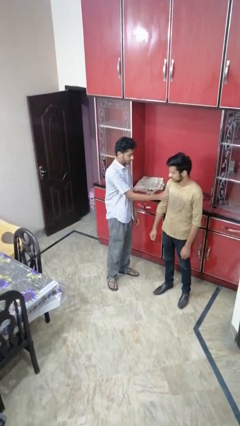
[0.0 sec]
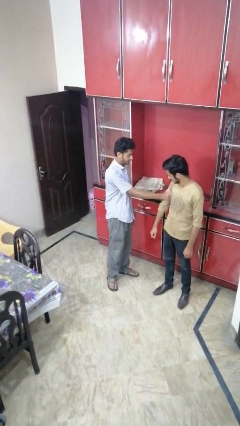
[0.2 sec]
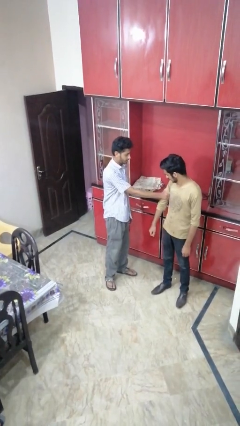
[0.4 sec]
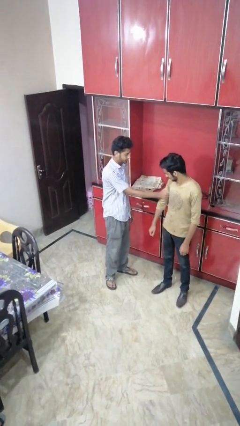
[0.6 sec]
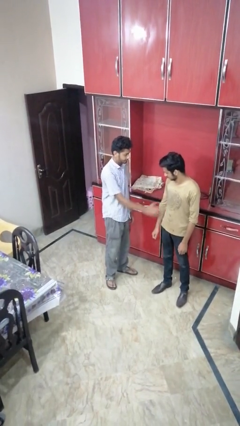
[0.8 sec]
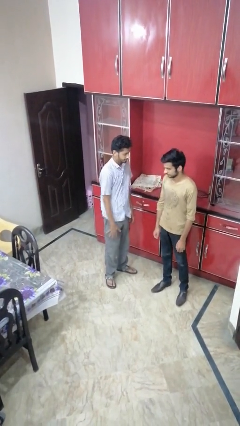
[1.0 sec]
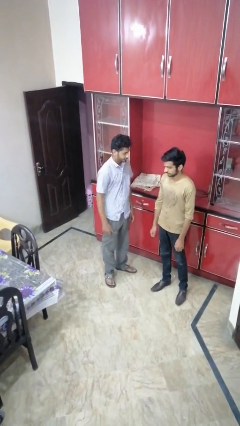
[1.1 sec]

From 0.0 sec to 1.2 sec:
person grabs person by bicep

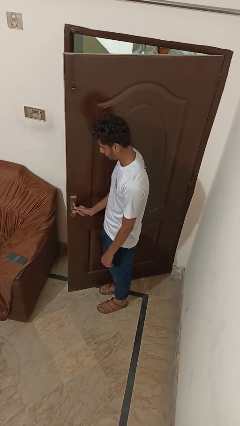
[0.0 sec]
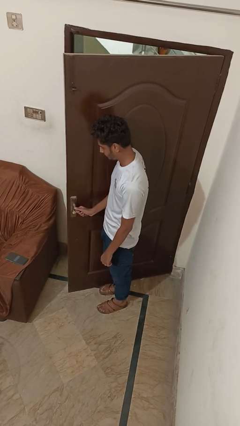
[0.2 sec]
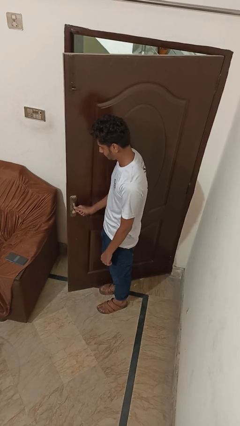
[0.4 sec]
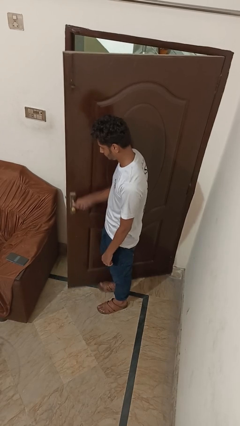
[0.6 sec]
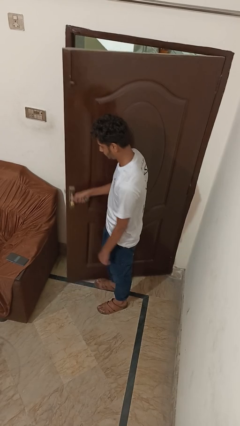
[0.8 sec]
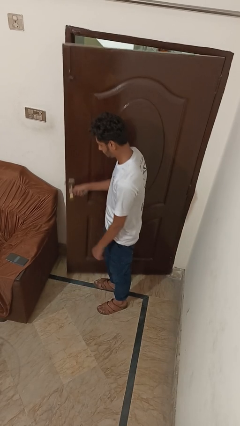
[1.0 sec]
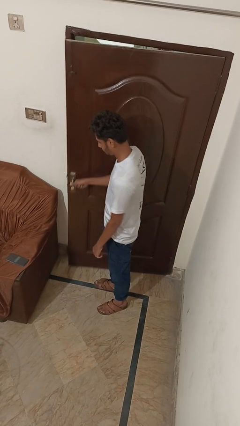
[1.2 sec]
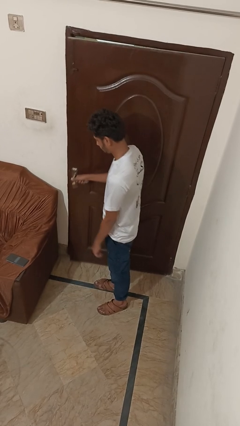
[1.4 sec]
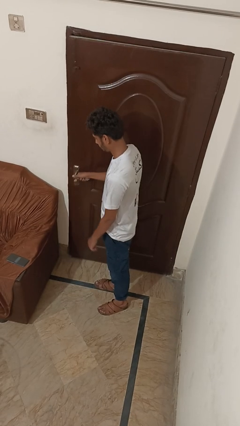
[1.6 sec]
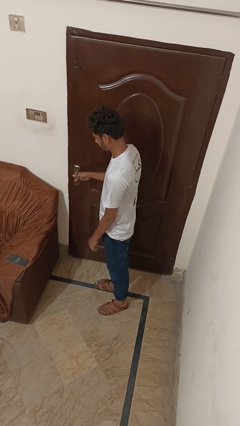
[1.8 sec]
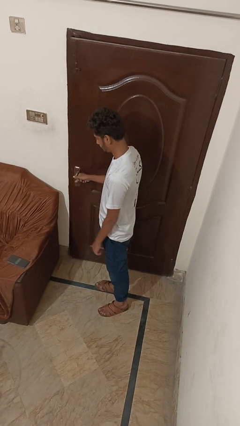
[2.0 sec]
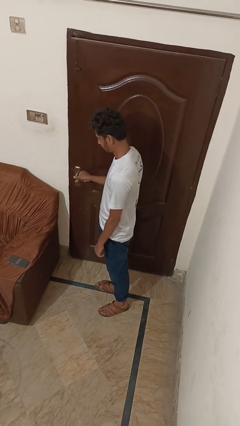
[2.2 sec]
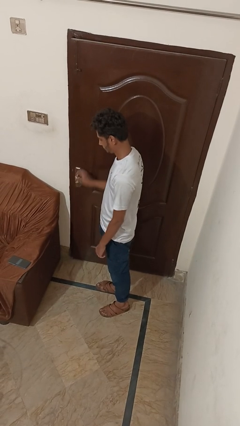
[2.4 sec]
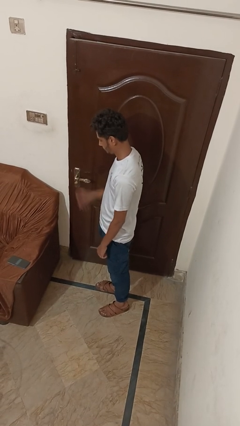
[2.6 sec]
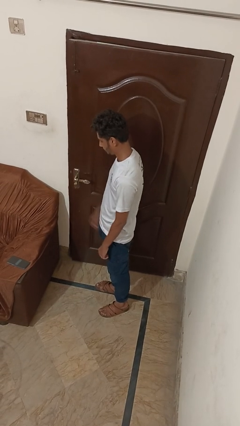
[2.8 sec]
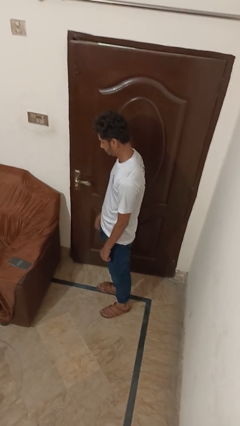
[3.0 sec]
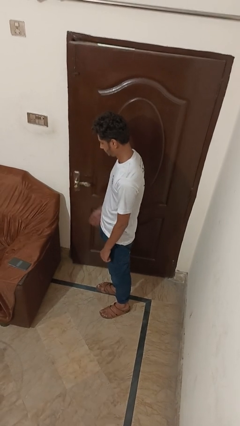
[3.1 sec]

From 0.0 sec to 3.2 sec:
person closes facility door

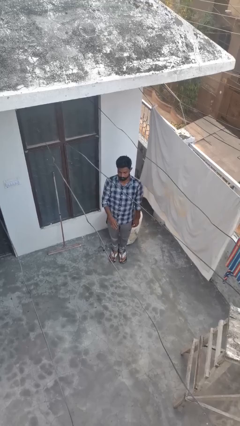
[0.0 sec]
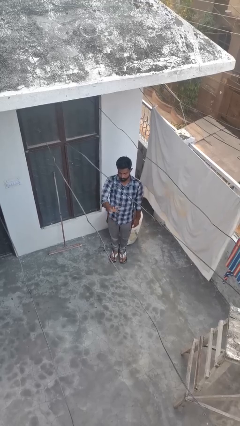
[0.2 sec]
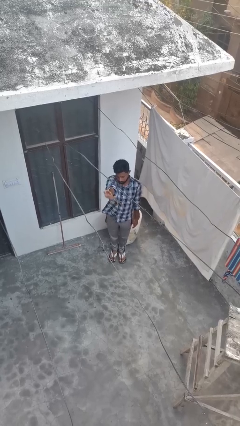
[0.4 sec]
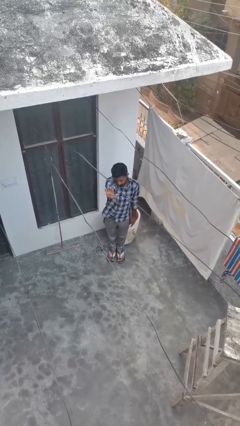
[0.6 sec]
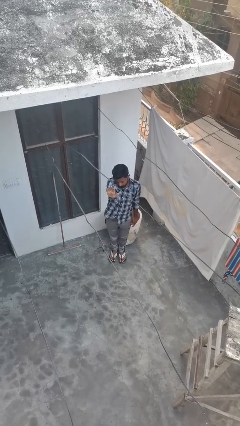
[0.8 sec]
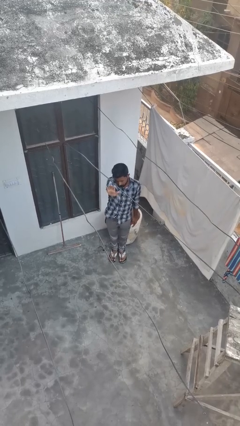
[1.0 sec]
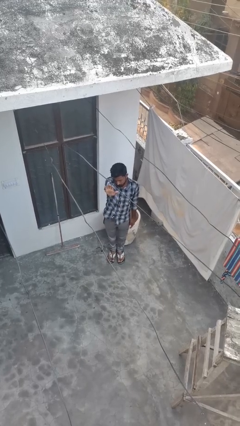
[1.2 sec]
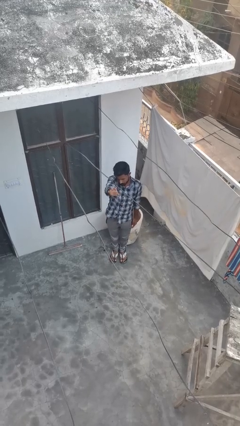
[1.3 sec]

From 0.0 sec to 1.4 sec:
person gestures stop

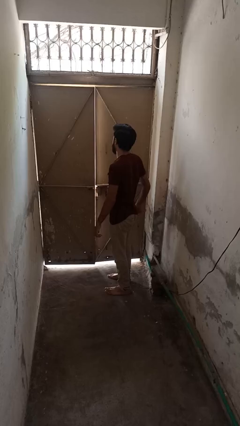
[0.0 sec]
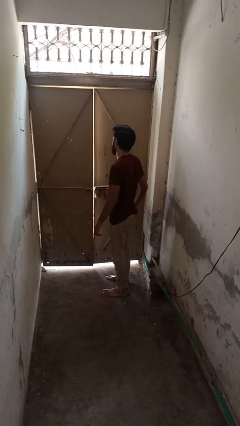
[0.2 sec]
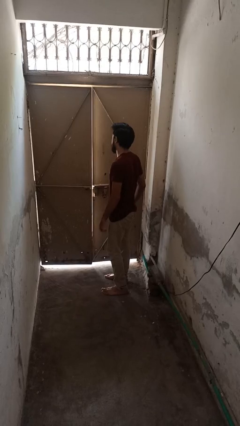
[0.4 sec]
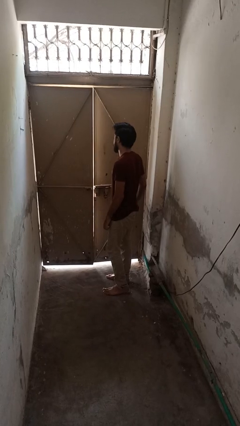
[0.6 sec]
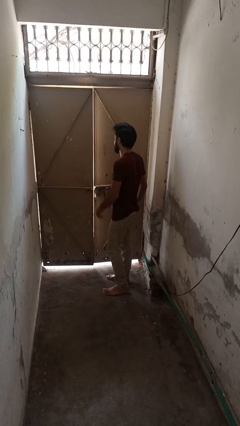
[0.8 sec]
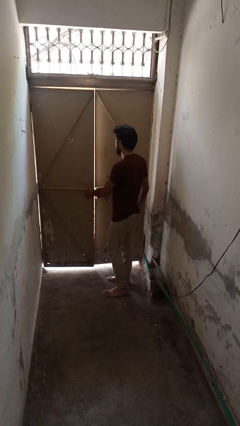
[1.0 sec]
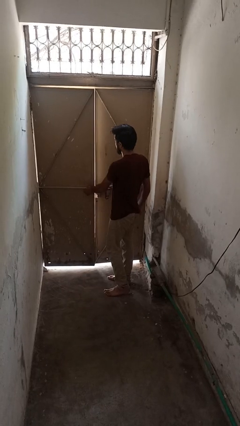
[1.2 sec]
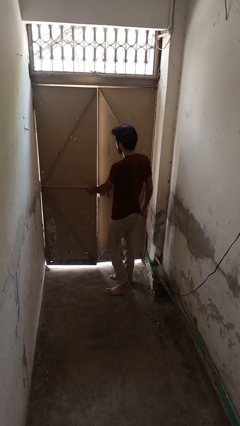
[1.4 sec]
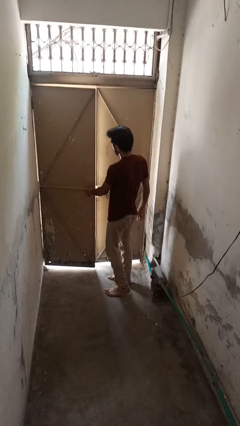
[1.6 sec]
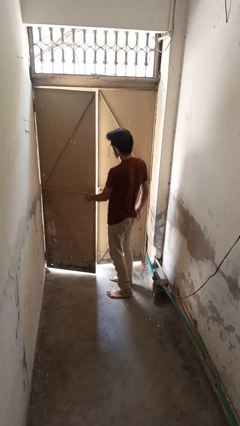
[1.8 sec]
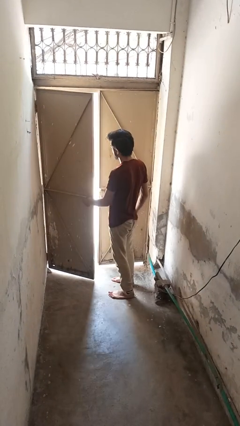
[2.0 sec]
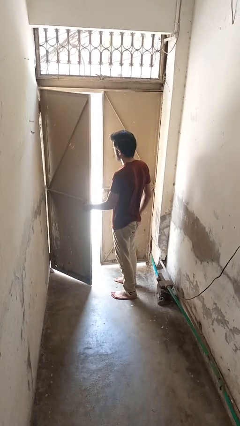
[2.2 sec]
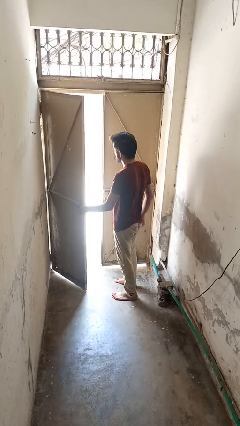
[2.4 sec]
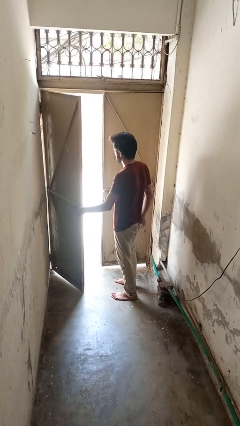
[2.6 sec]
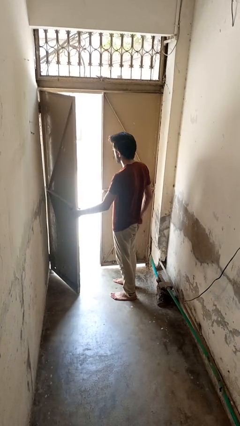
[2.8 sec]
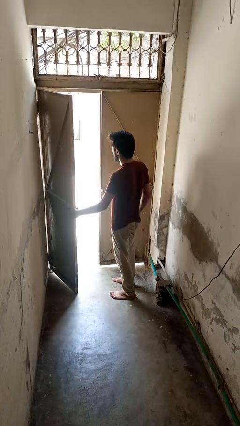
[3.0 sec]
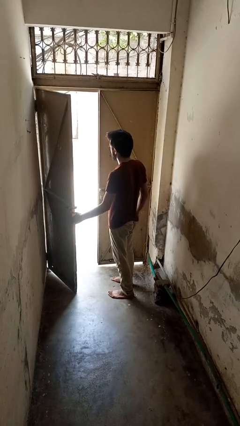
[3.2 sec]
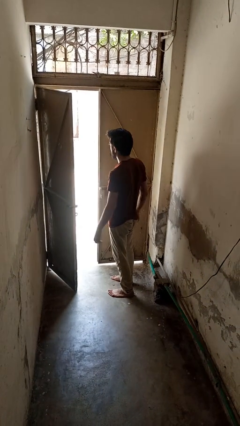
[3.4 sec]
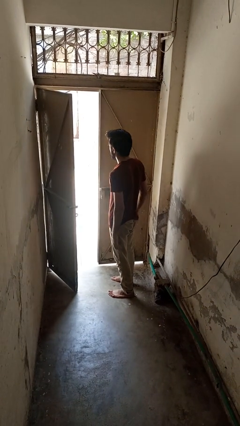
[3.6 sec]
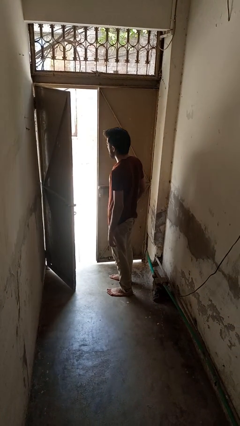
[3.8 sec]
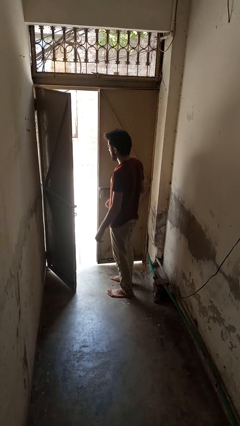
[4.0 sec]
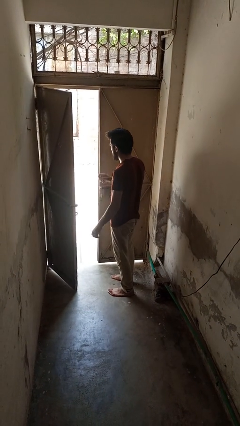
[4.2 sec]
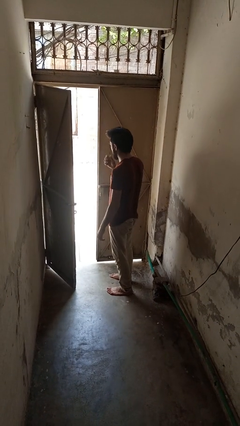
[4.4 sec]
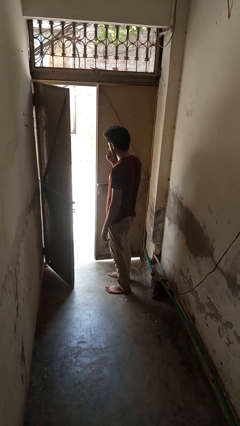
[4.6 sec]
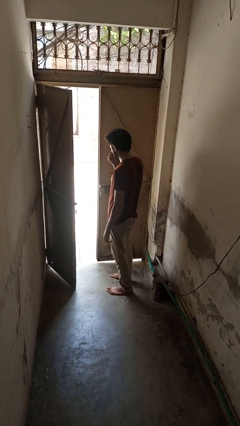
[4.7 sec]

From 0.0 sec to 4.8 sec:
person opens gate

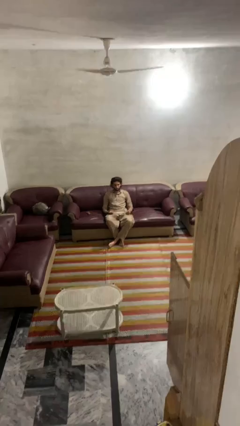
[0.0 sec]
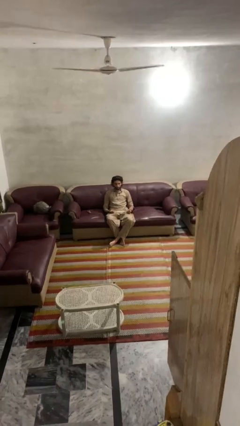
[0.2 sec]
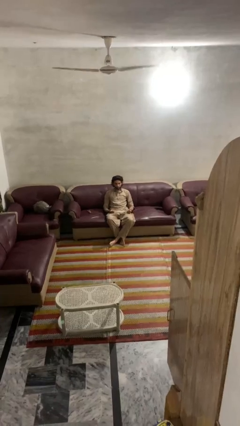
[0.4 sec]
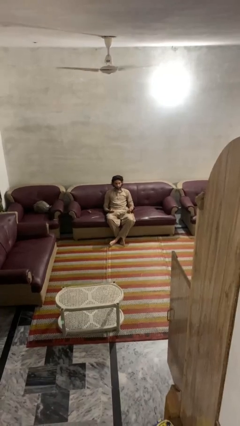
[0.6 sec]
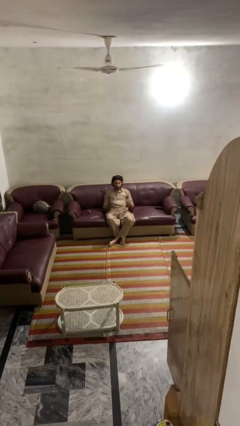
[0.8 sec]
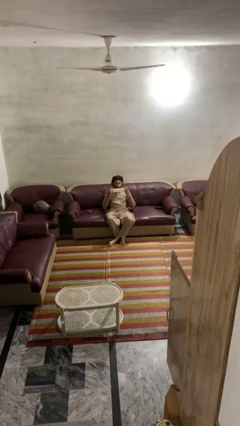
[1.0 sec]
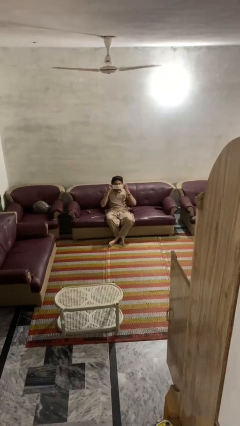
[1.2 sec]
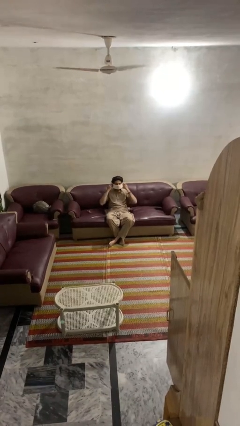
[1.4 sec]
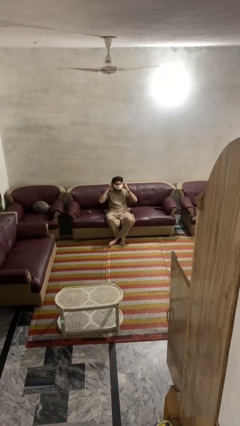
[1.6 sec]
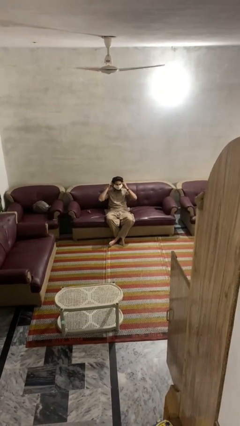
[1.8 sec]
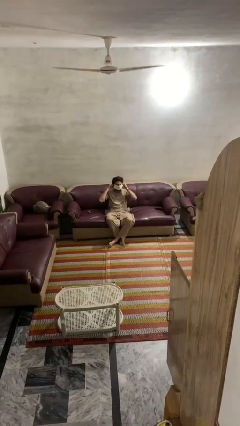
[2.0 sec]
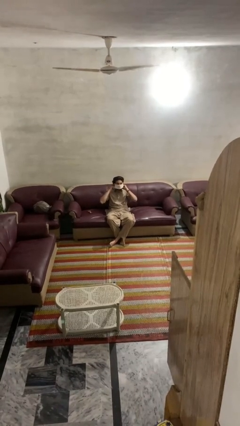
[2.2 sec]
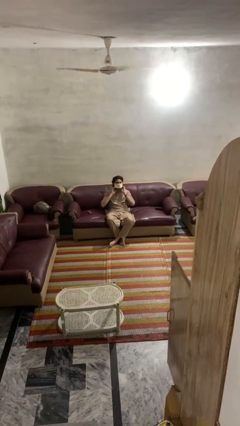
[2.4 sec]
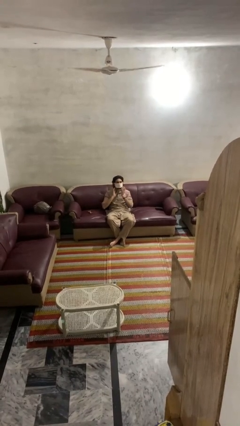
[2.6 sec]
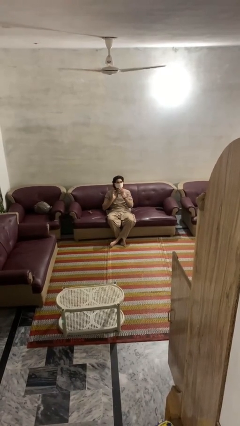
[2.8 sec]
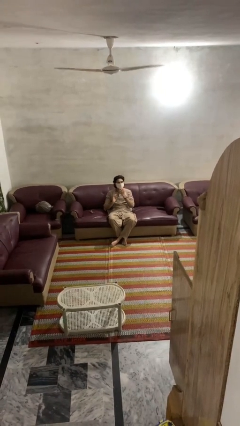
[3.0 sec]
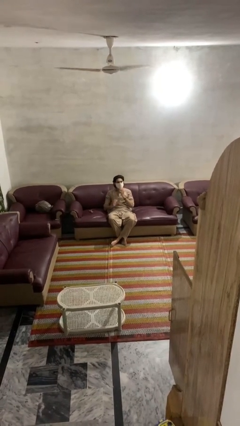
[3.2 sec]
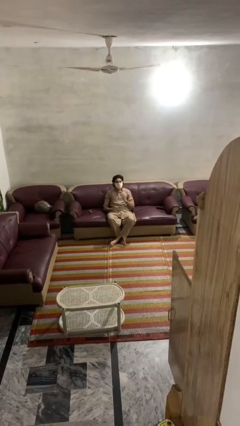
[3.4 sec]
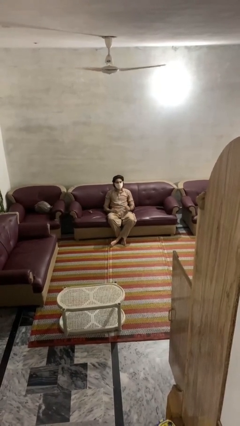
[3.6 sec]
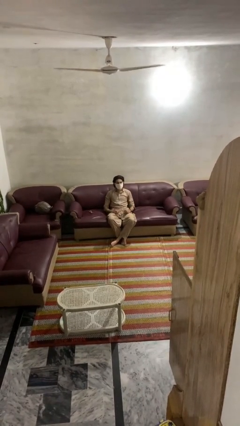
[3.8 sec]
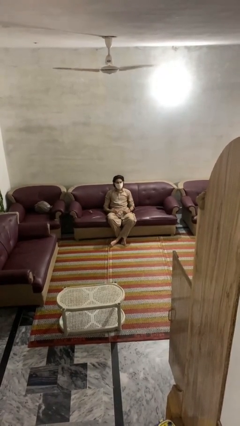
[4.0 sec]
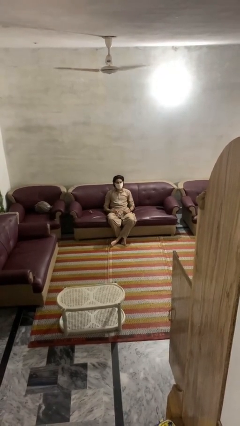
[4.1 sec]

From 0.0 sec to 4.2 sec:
person puts on facemask

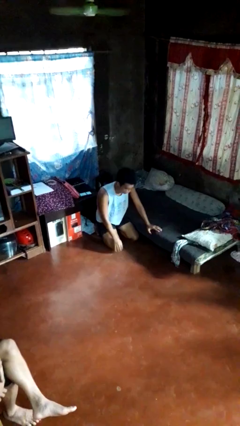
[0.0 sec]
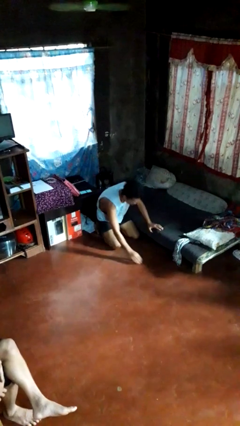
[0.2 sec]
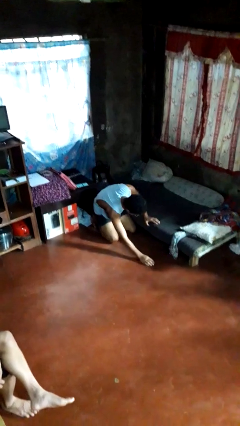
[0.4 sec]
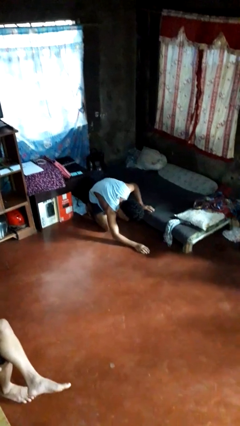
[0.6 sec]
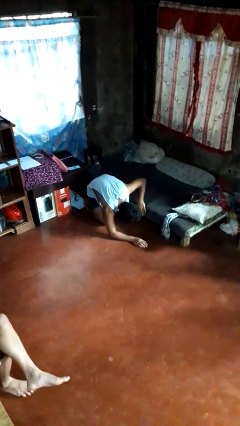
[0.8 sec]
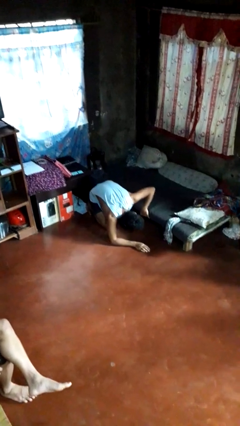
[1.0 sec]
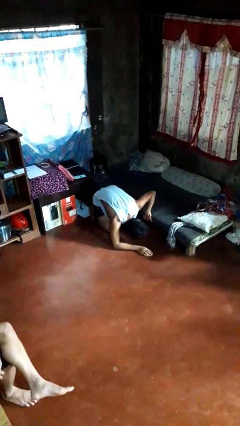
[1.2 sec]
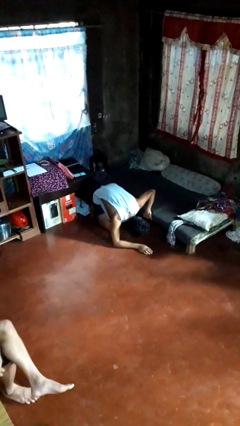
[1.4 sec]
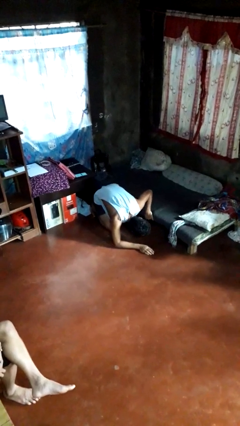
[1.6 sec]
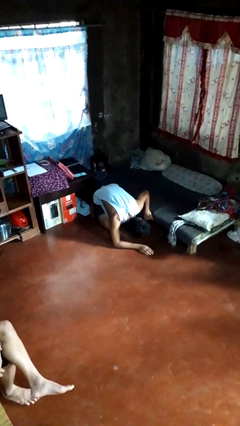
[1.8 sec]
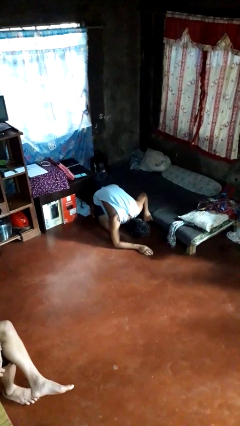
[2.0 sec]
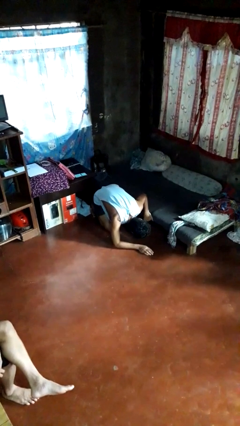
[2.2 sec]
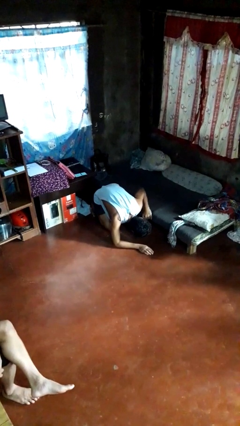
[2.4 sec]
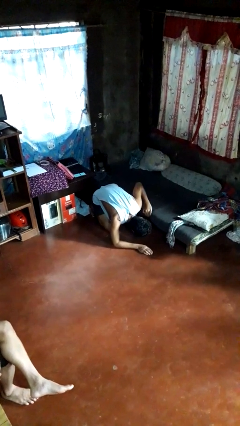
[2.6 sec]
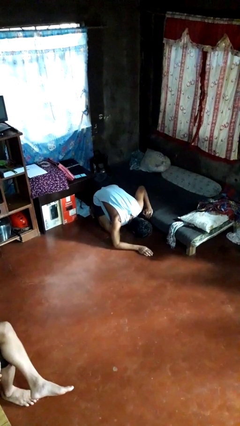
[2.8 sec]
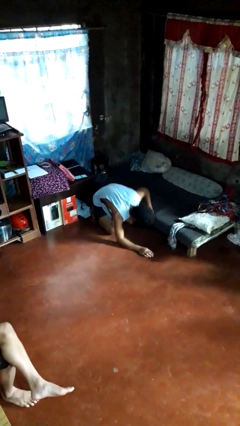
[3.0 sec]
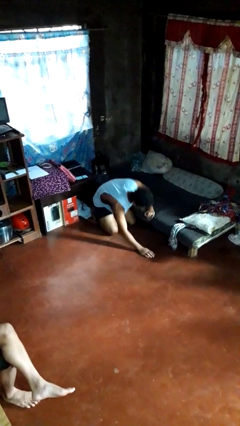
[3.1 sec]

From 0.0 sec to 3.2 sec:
person searches under bed
